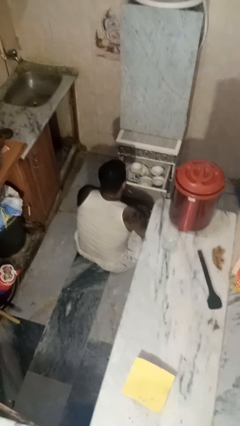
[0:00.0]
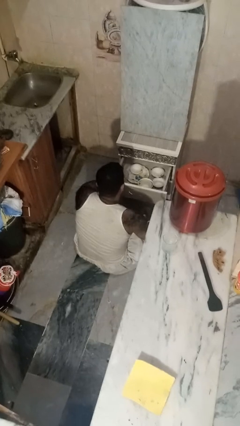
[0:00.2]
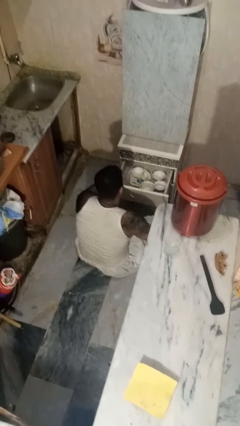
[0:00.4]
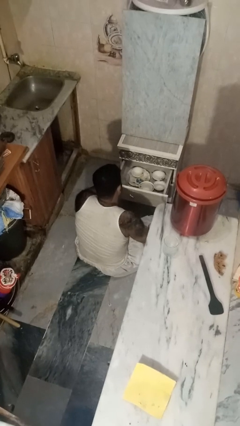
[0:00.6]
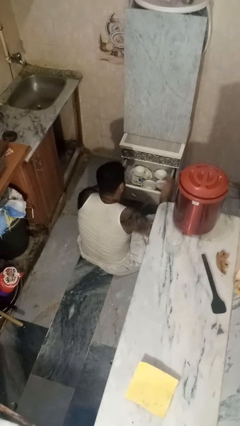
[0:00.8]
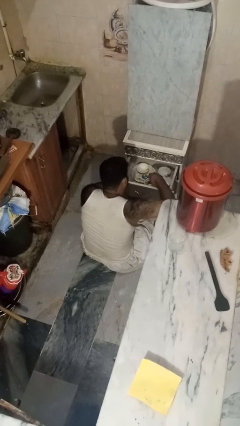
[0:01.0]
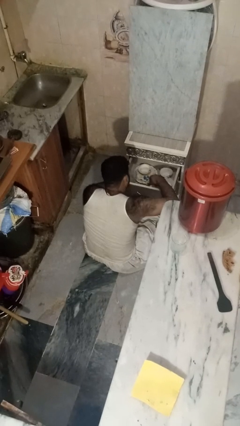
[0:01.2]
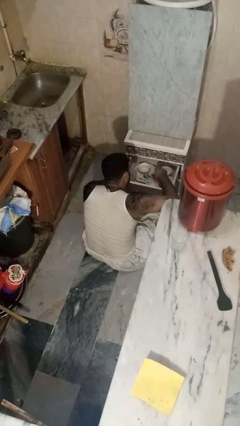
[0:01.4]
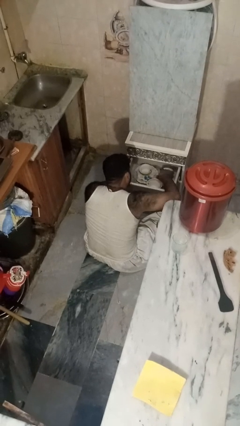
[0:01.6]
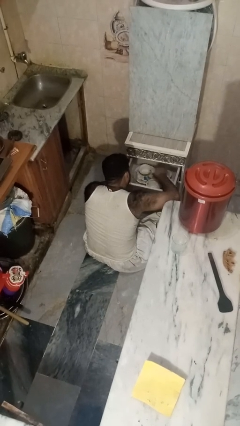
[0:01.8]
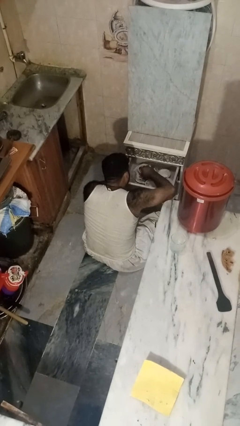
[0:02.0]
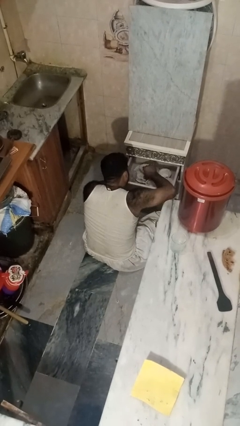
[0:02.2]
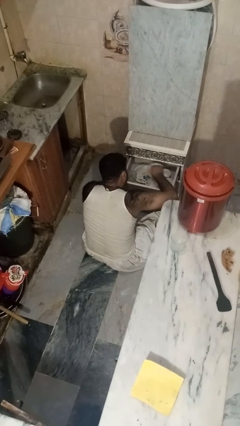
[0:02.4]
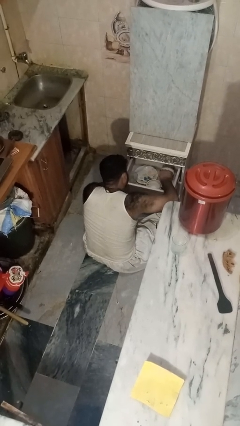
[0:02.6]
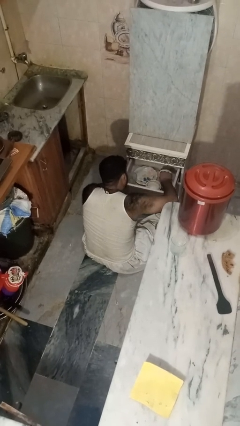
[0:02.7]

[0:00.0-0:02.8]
person searches in kitchen drawer

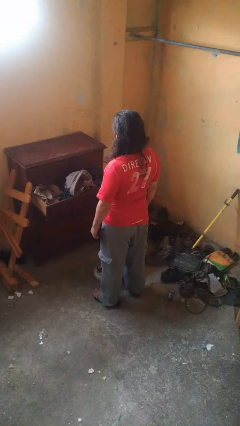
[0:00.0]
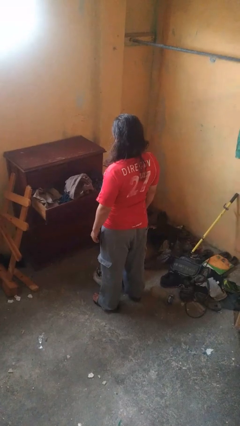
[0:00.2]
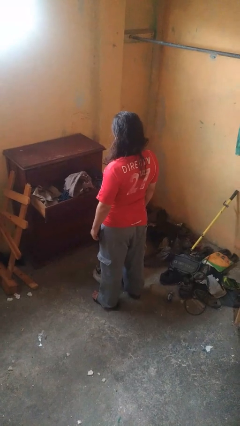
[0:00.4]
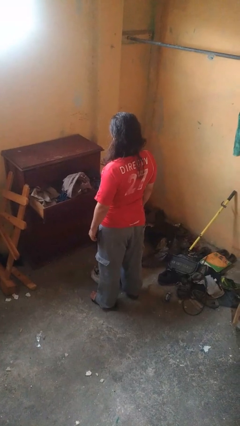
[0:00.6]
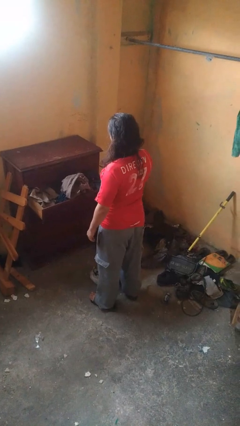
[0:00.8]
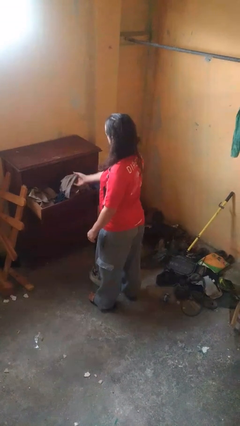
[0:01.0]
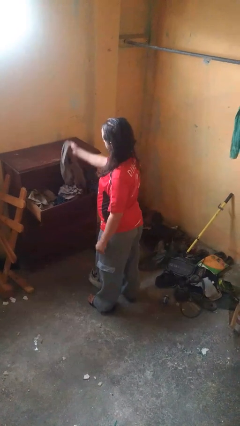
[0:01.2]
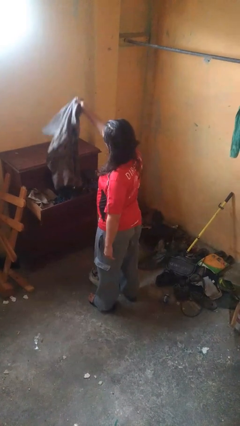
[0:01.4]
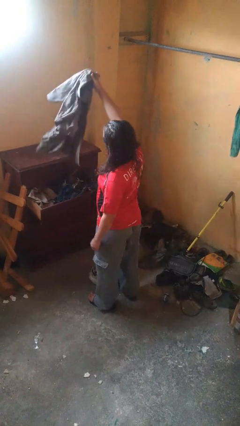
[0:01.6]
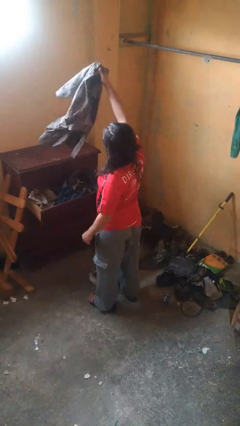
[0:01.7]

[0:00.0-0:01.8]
person takes clothes from dresser

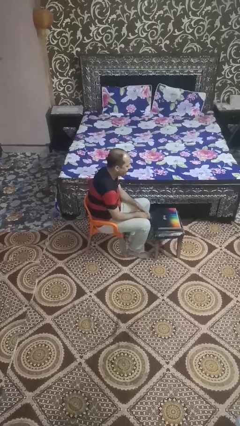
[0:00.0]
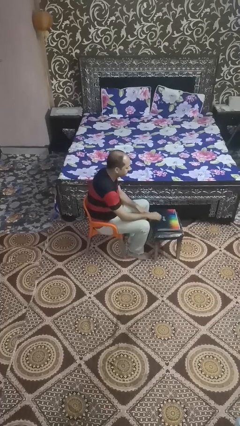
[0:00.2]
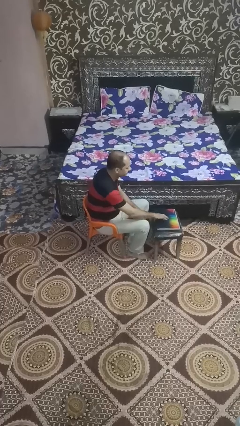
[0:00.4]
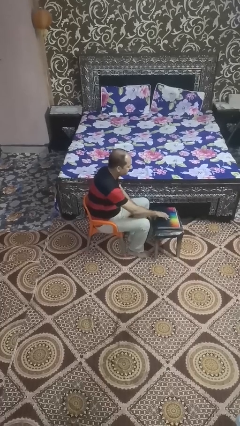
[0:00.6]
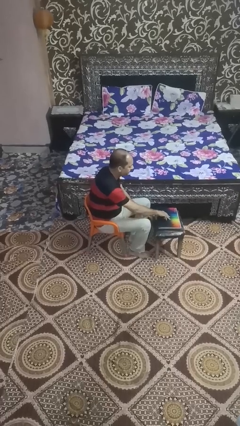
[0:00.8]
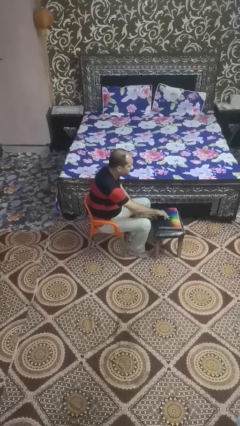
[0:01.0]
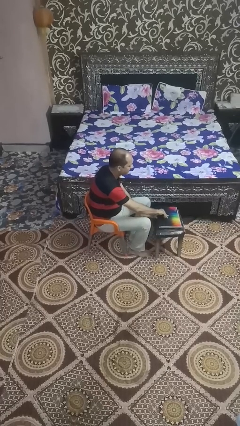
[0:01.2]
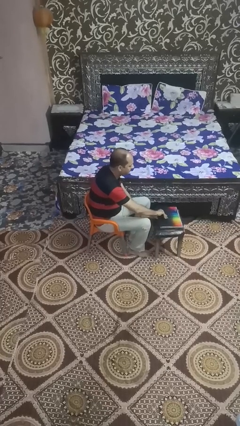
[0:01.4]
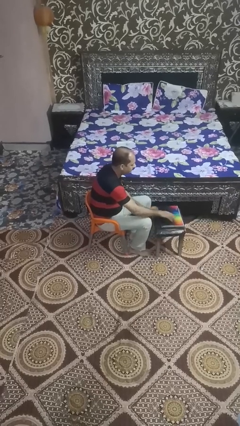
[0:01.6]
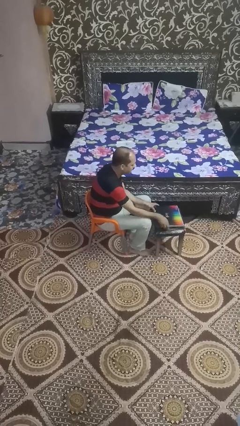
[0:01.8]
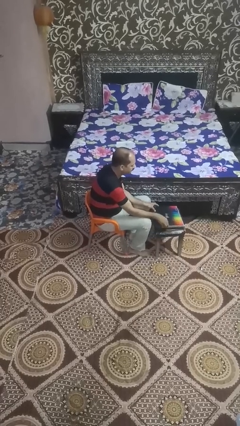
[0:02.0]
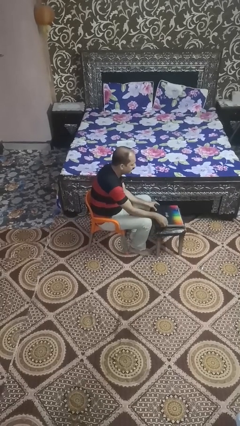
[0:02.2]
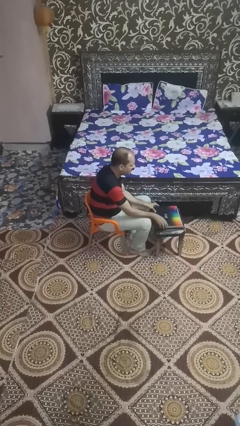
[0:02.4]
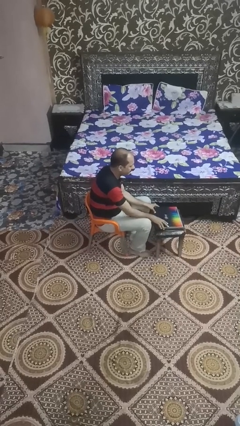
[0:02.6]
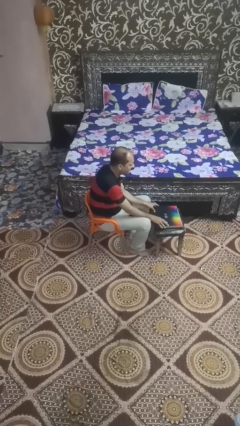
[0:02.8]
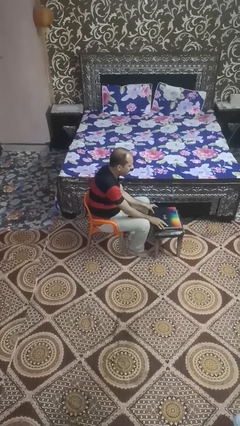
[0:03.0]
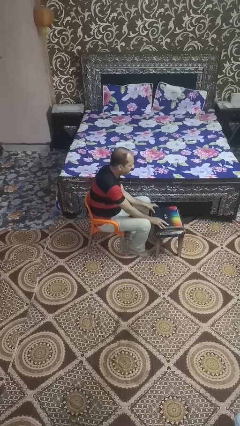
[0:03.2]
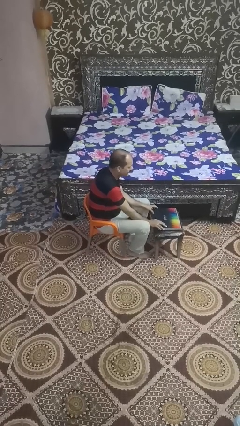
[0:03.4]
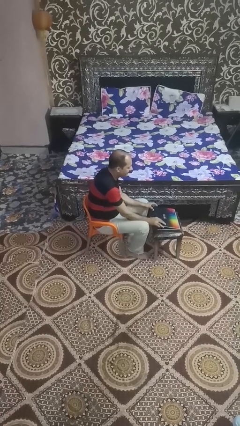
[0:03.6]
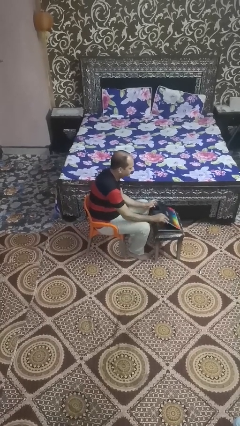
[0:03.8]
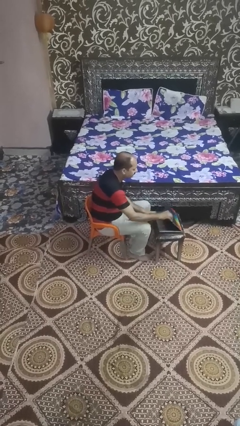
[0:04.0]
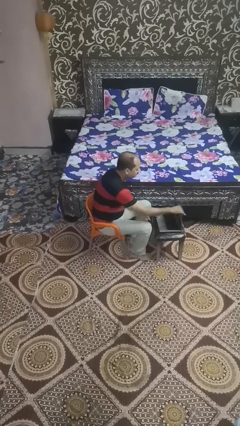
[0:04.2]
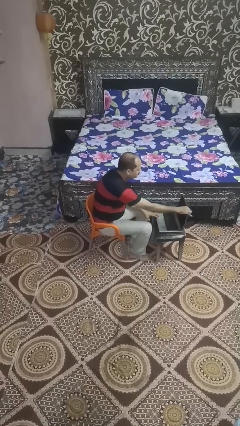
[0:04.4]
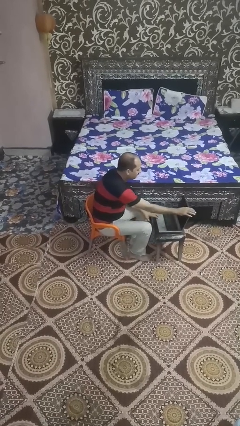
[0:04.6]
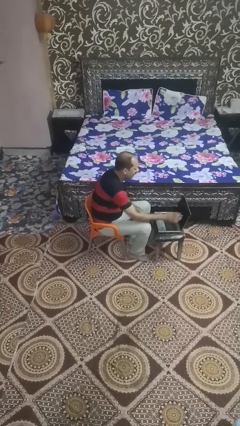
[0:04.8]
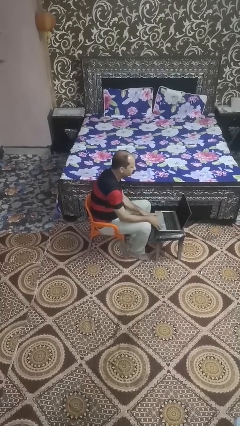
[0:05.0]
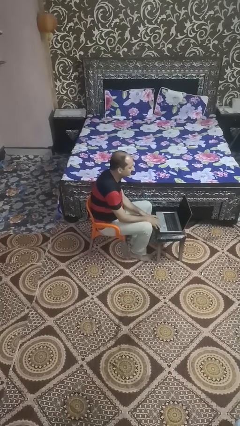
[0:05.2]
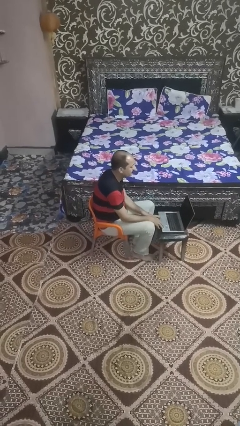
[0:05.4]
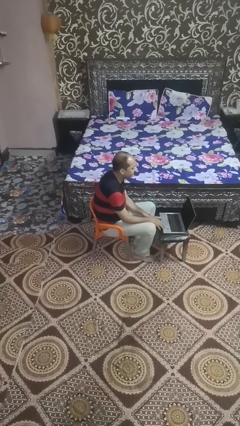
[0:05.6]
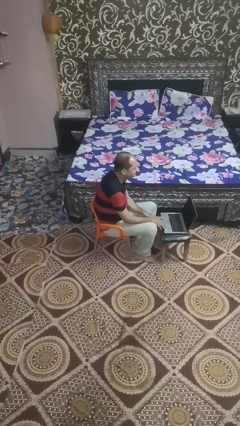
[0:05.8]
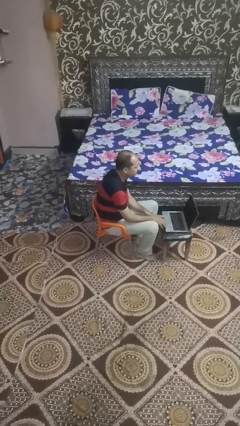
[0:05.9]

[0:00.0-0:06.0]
person opens laptop

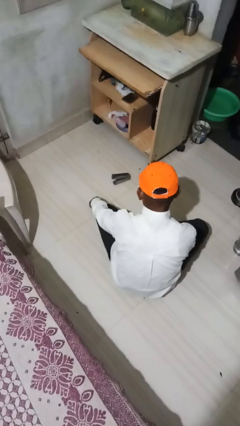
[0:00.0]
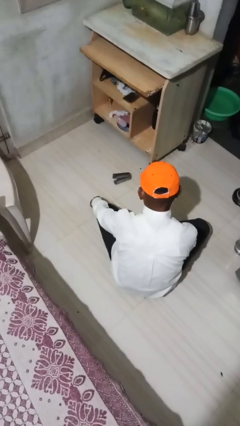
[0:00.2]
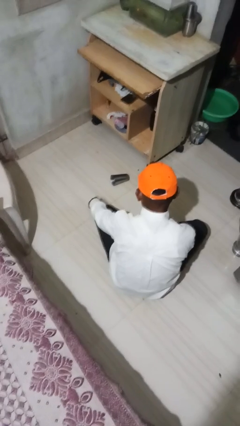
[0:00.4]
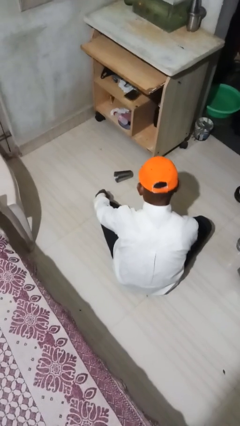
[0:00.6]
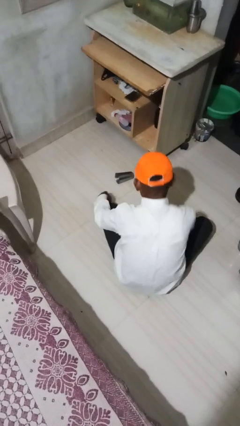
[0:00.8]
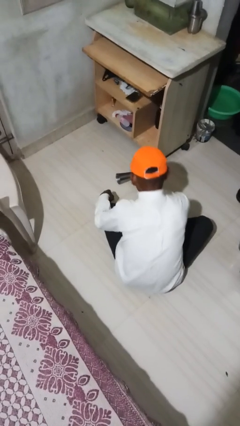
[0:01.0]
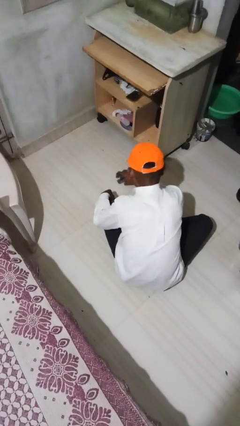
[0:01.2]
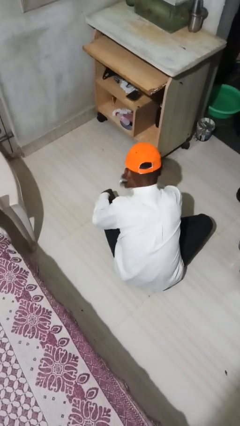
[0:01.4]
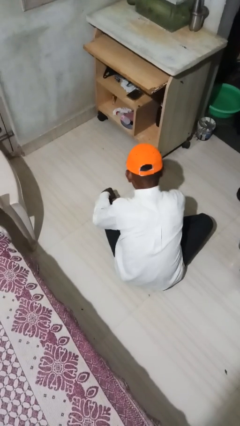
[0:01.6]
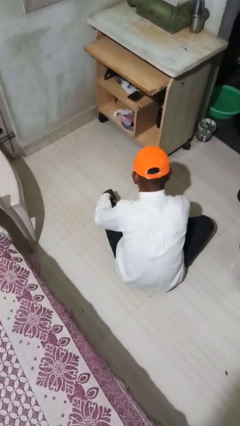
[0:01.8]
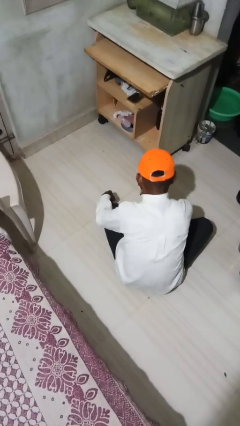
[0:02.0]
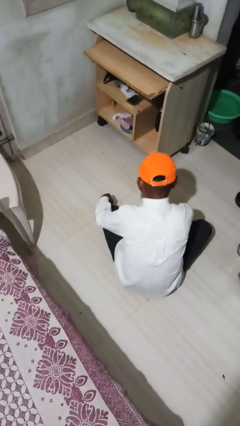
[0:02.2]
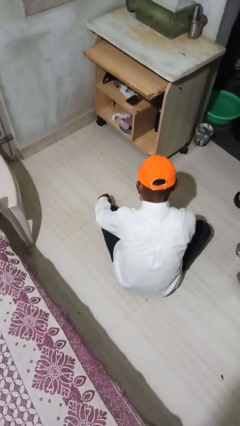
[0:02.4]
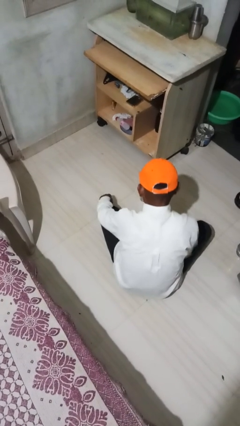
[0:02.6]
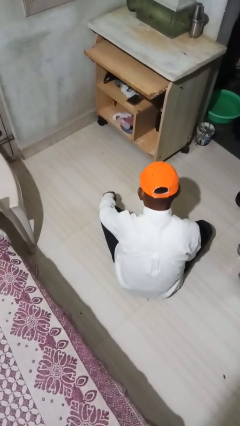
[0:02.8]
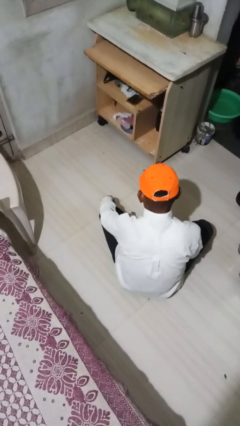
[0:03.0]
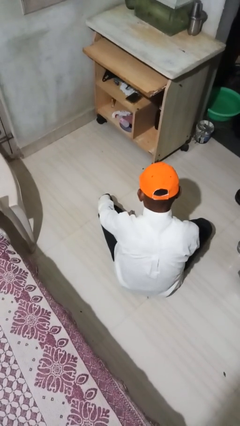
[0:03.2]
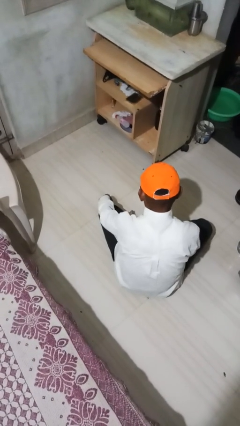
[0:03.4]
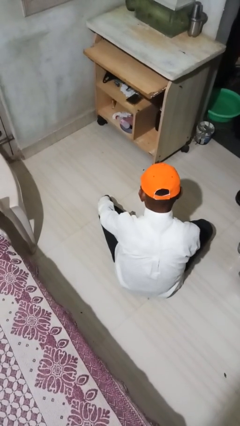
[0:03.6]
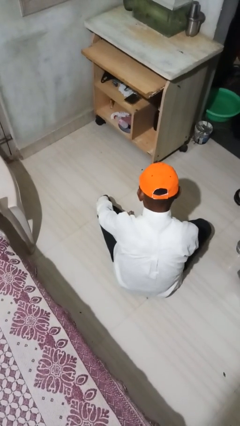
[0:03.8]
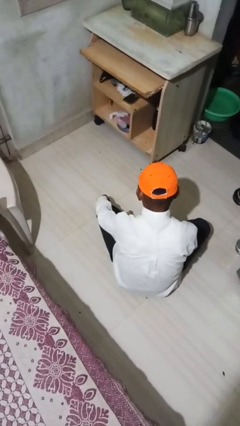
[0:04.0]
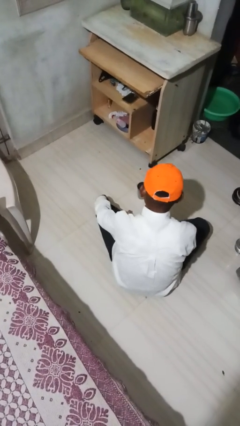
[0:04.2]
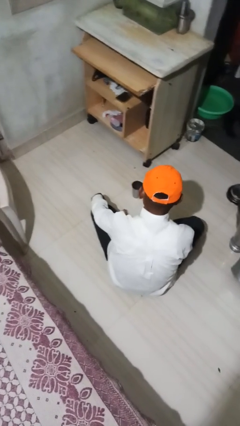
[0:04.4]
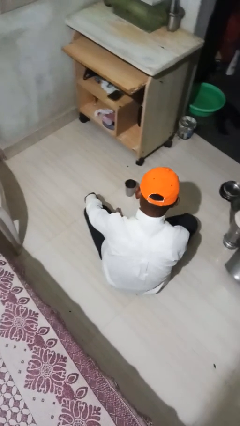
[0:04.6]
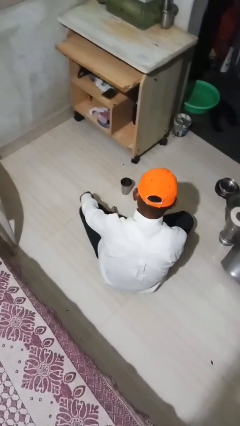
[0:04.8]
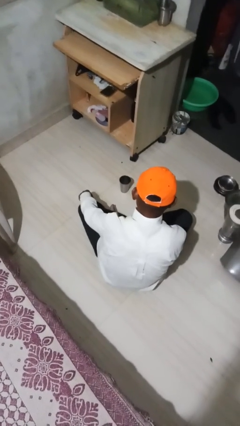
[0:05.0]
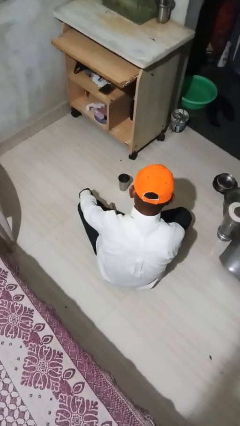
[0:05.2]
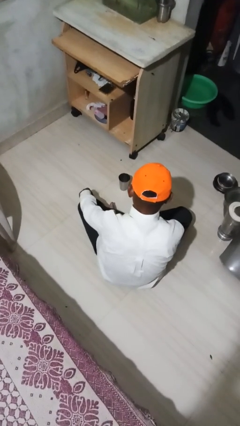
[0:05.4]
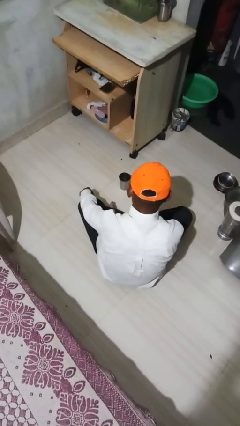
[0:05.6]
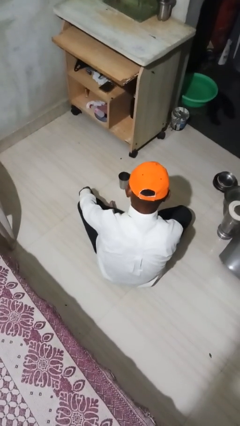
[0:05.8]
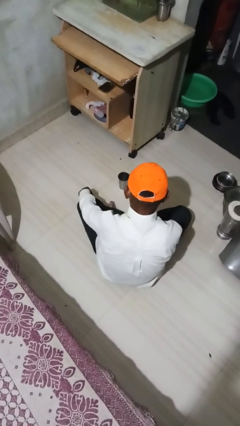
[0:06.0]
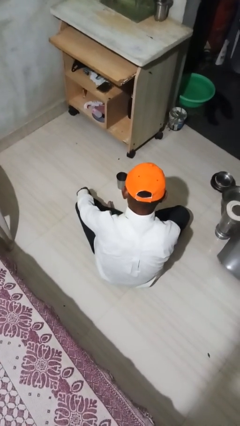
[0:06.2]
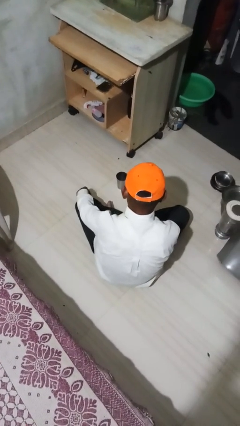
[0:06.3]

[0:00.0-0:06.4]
person sets upright glass

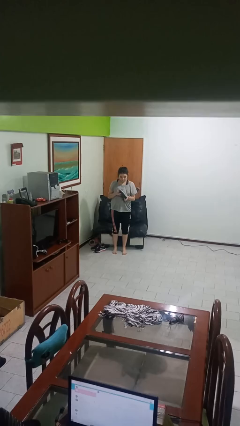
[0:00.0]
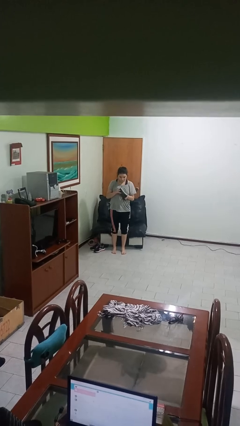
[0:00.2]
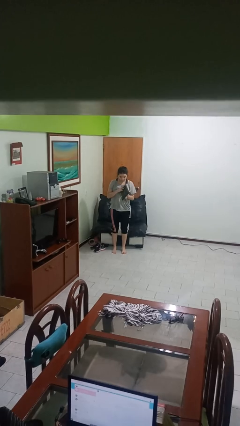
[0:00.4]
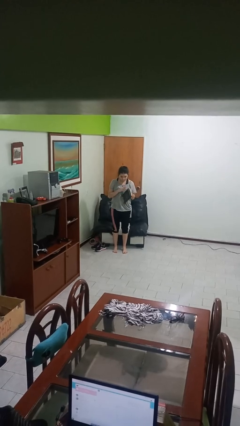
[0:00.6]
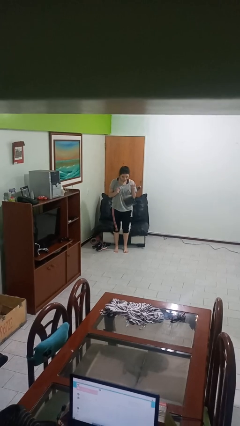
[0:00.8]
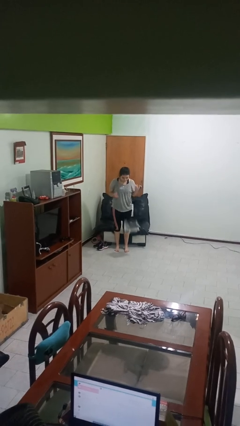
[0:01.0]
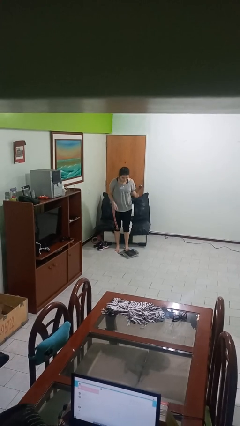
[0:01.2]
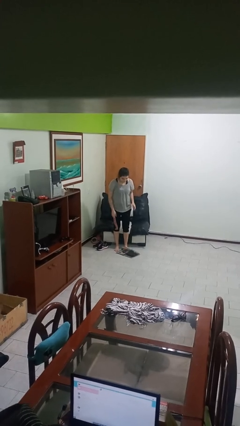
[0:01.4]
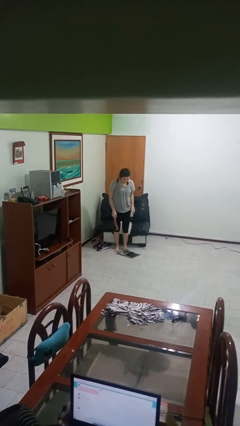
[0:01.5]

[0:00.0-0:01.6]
person drops object
